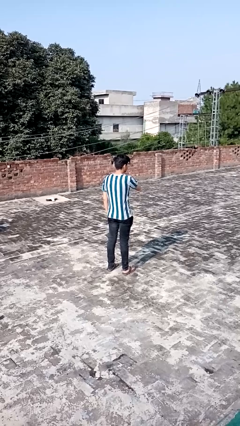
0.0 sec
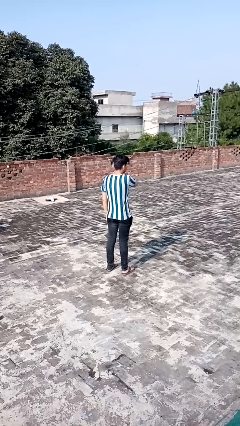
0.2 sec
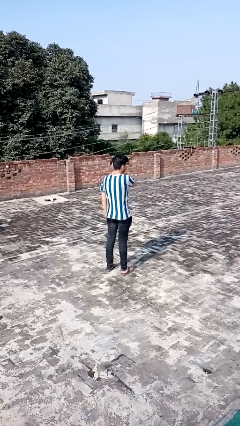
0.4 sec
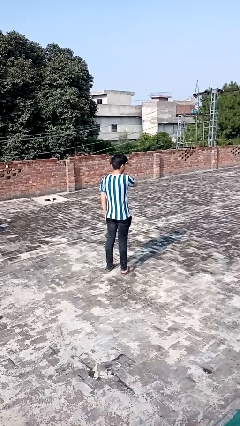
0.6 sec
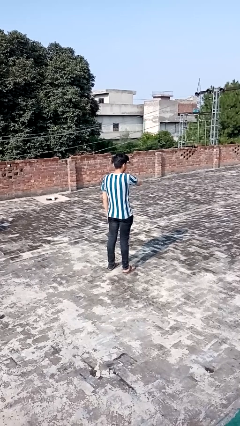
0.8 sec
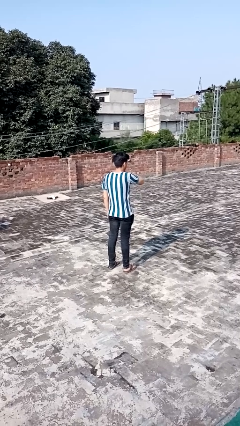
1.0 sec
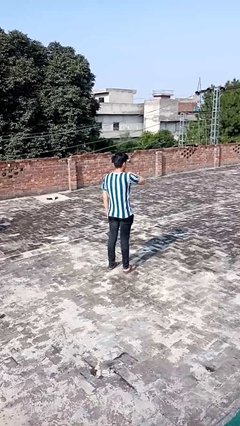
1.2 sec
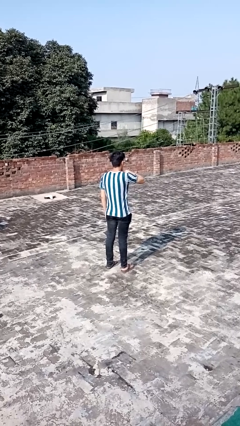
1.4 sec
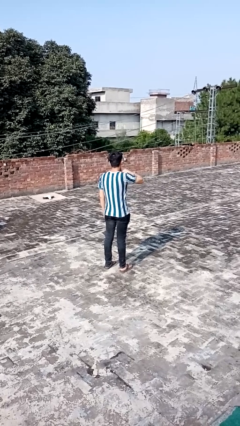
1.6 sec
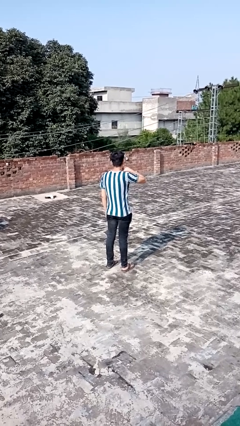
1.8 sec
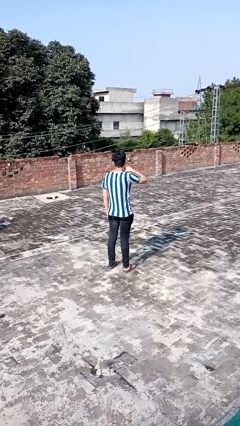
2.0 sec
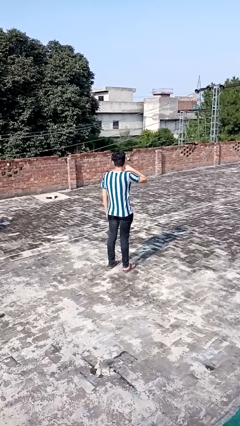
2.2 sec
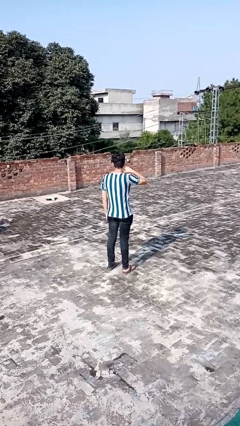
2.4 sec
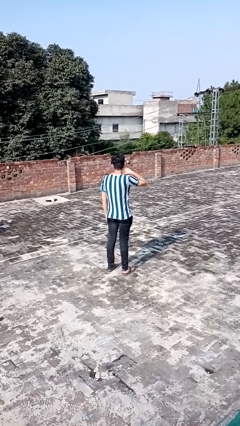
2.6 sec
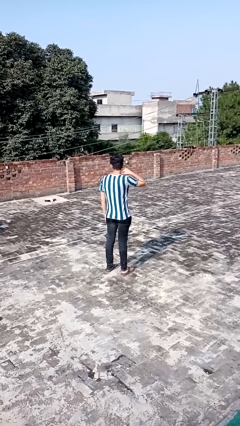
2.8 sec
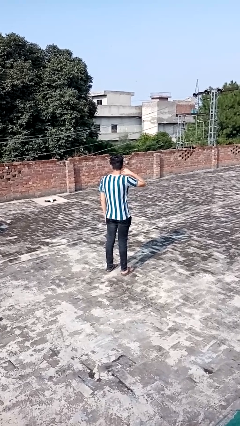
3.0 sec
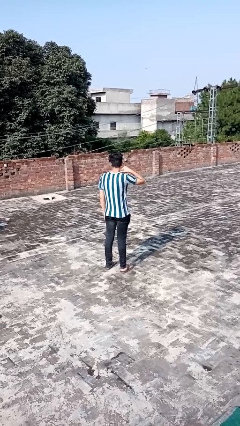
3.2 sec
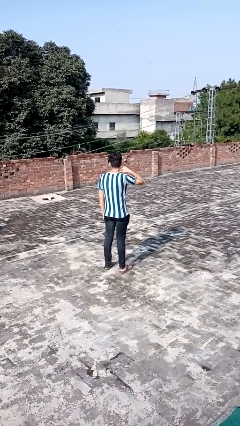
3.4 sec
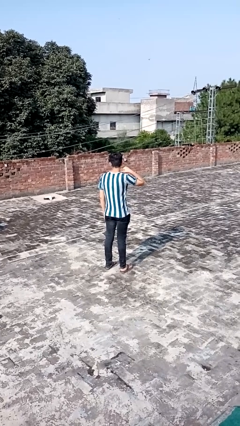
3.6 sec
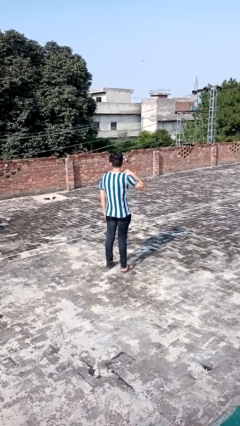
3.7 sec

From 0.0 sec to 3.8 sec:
person gestures cut

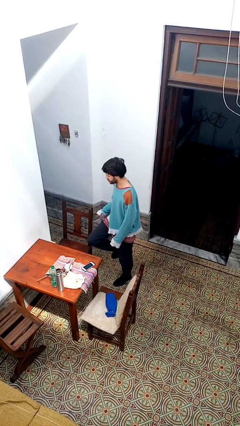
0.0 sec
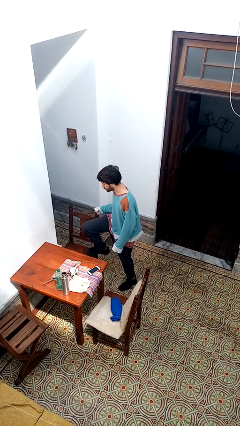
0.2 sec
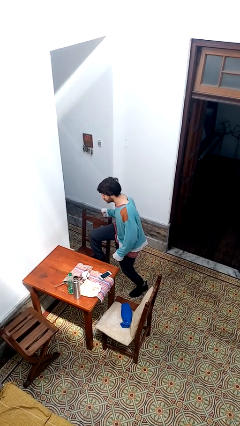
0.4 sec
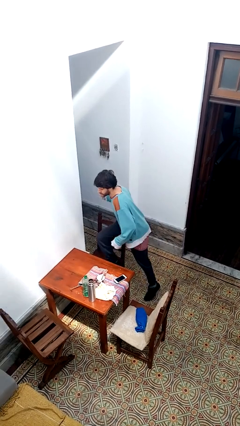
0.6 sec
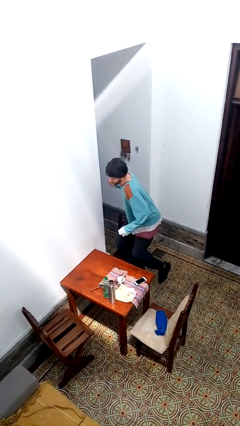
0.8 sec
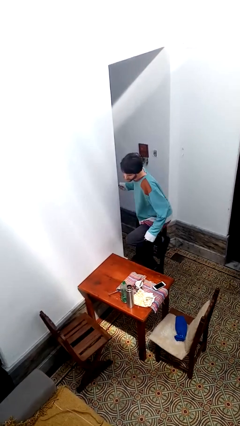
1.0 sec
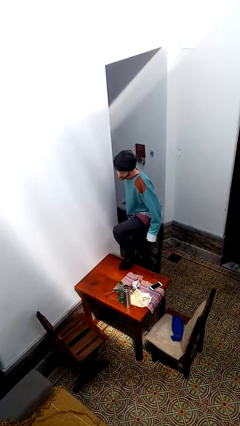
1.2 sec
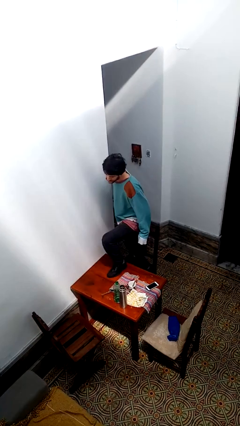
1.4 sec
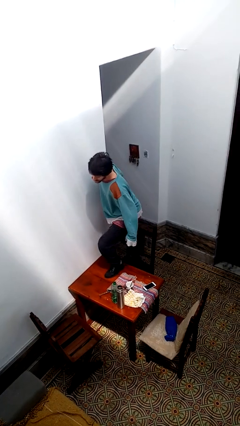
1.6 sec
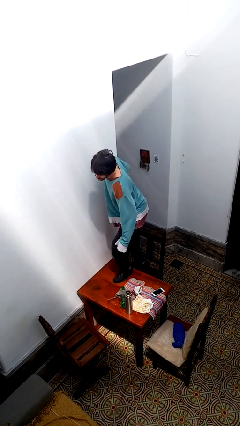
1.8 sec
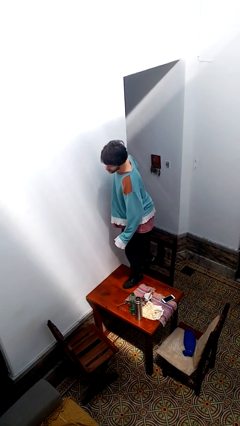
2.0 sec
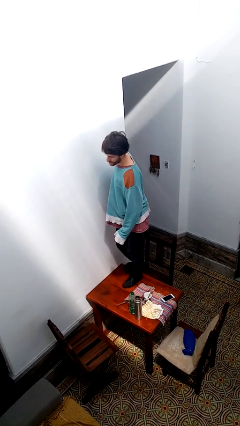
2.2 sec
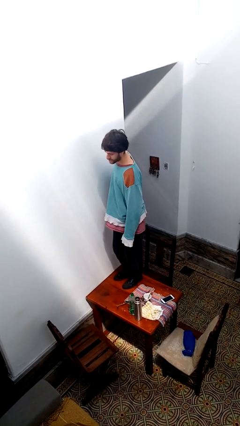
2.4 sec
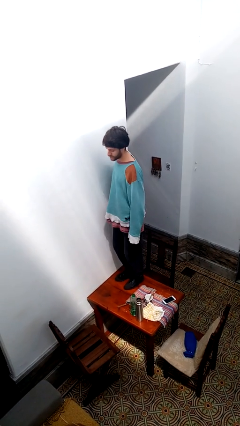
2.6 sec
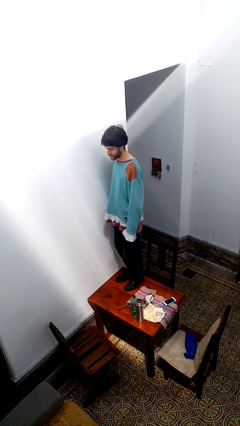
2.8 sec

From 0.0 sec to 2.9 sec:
person climbs on table

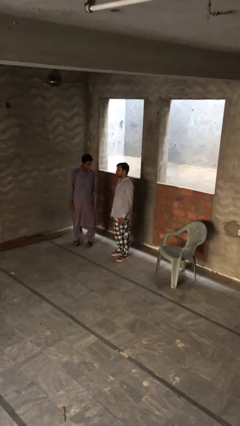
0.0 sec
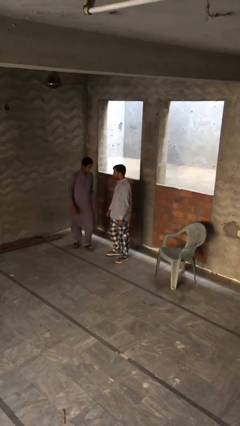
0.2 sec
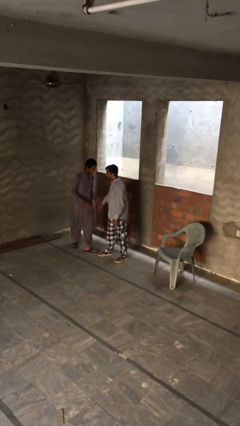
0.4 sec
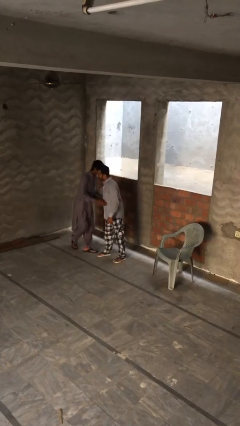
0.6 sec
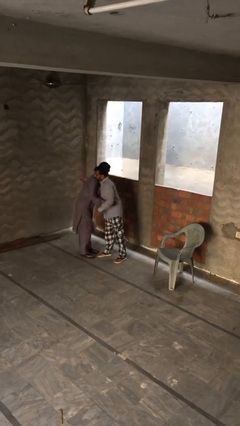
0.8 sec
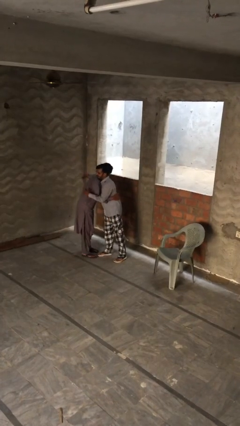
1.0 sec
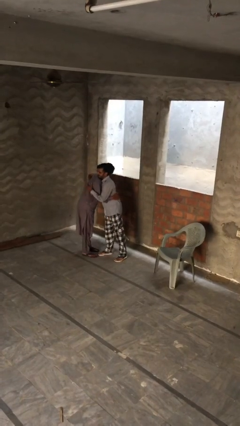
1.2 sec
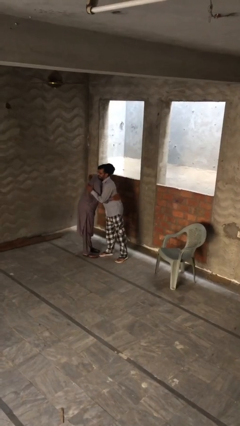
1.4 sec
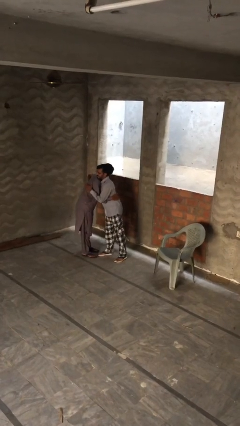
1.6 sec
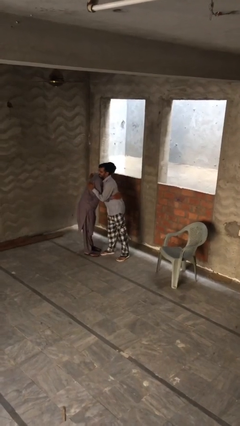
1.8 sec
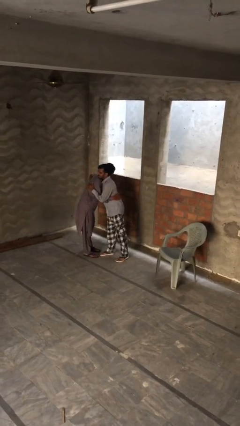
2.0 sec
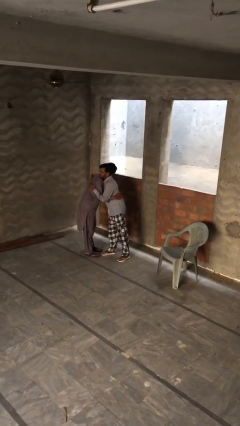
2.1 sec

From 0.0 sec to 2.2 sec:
person embraces person

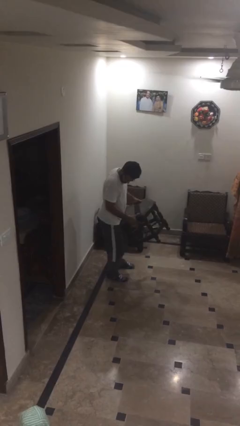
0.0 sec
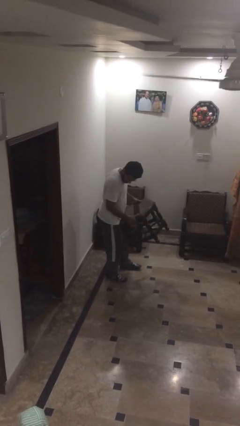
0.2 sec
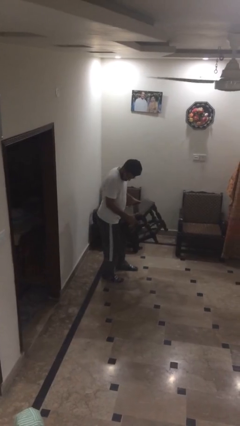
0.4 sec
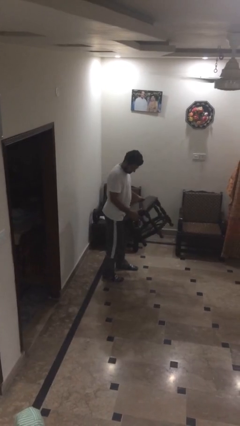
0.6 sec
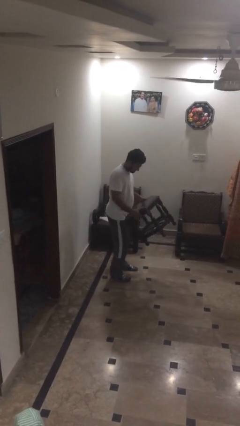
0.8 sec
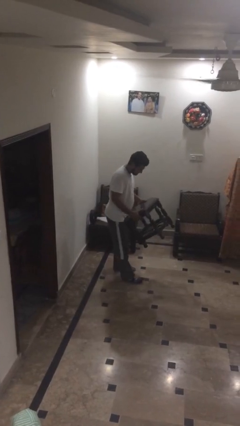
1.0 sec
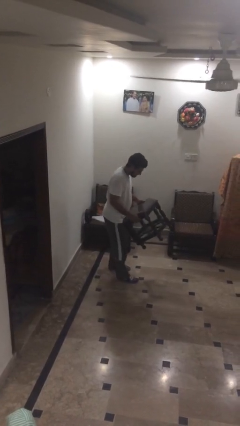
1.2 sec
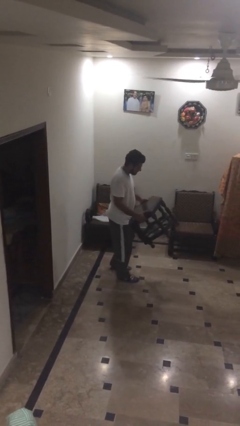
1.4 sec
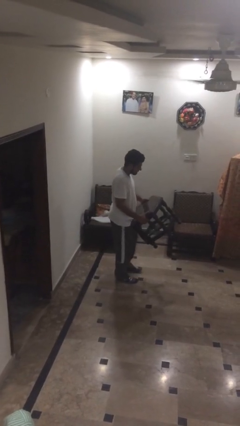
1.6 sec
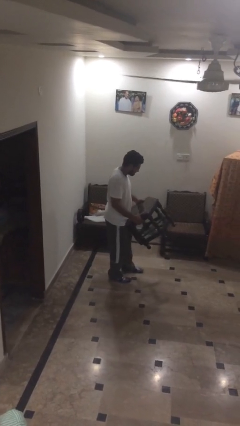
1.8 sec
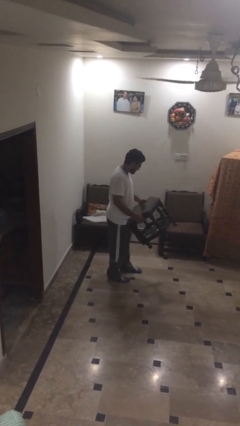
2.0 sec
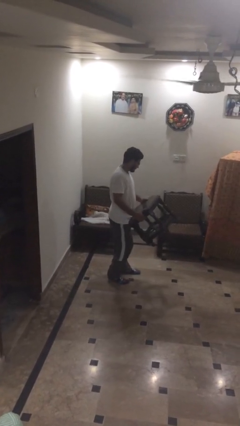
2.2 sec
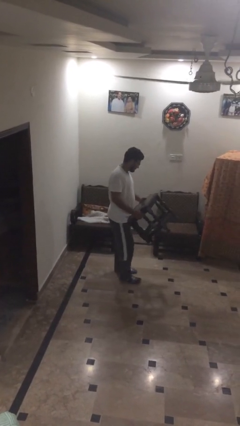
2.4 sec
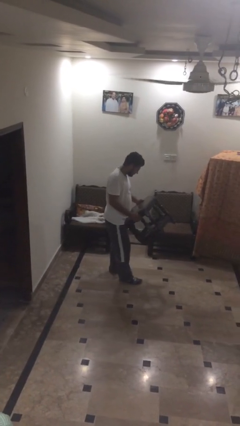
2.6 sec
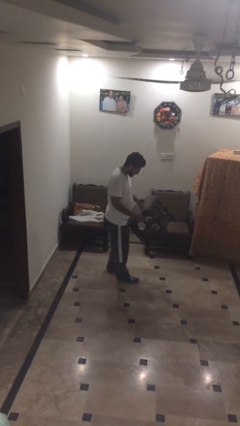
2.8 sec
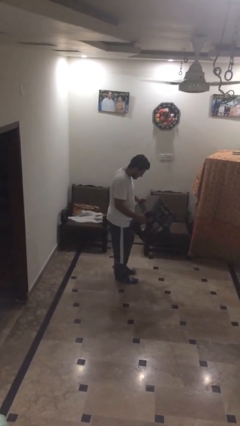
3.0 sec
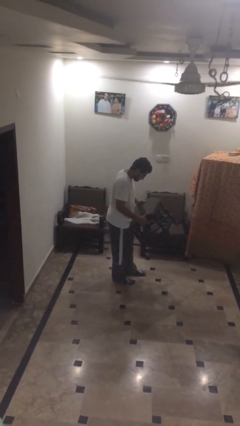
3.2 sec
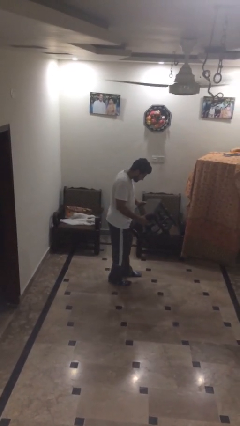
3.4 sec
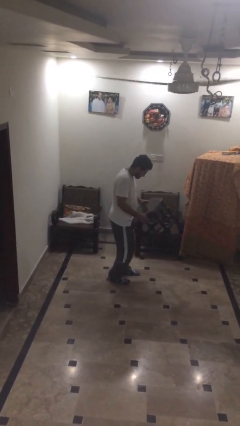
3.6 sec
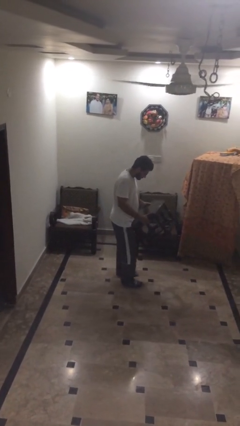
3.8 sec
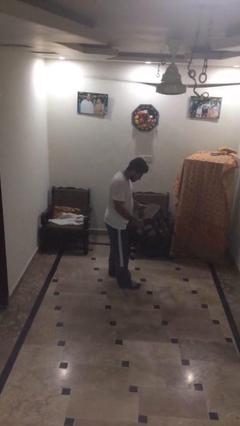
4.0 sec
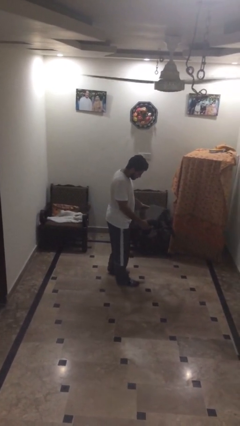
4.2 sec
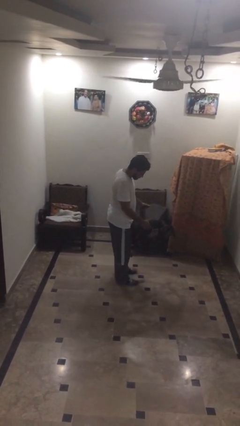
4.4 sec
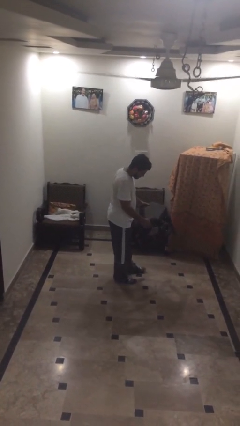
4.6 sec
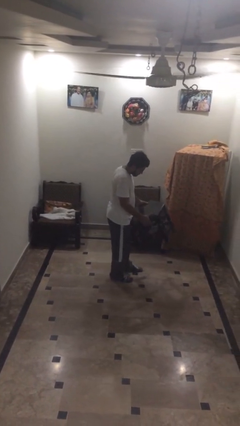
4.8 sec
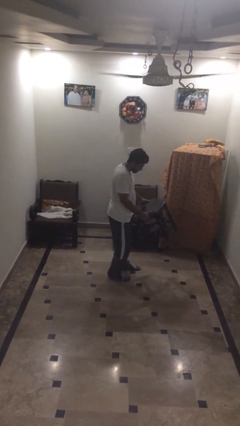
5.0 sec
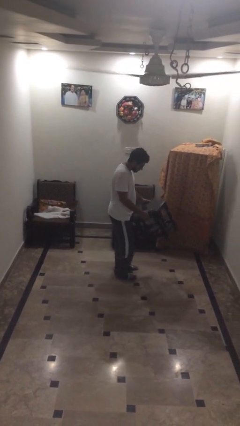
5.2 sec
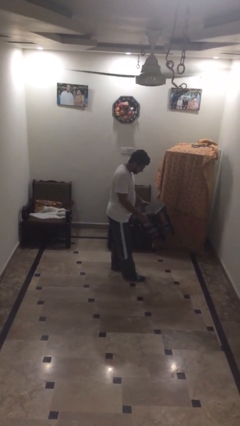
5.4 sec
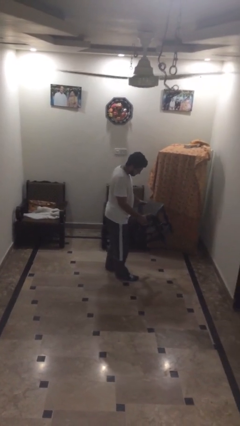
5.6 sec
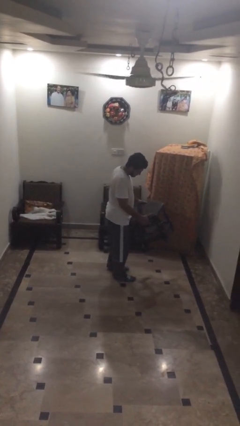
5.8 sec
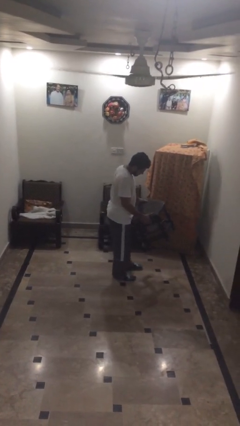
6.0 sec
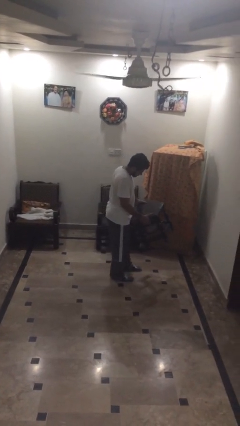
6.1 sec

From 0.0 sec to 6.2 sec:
person carries heavy object

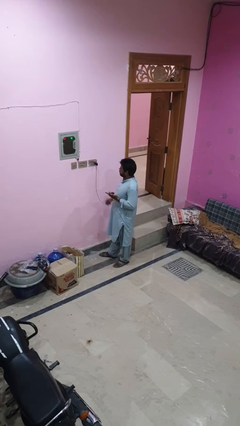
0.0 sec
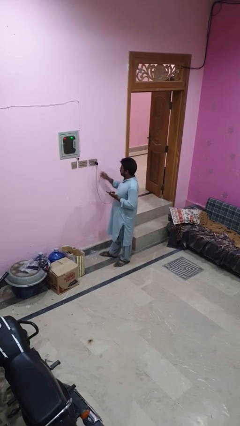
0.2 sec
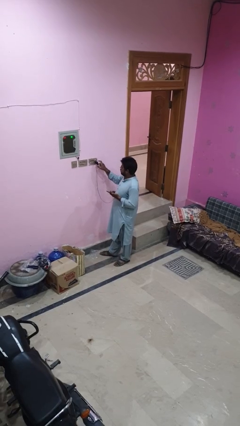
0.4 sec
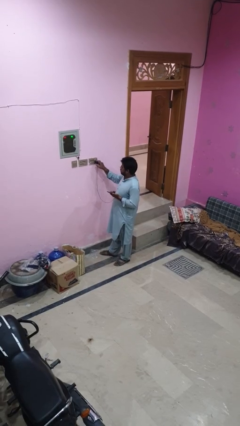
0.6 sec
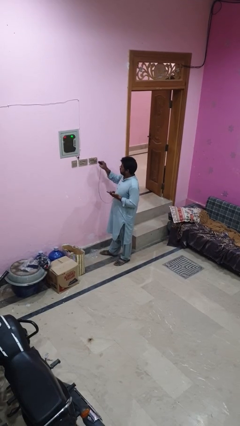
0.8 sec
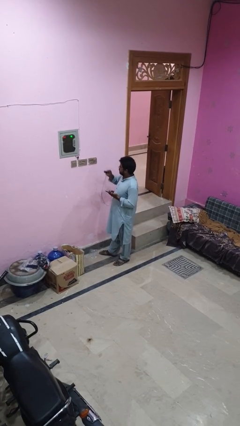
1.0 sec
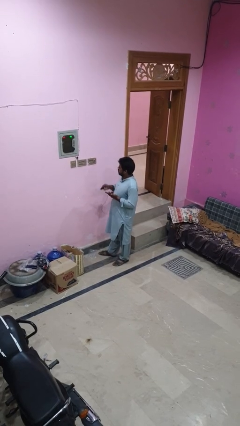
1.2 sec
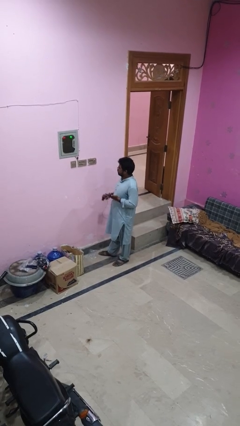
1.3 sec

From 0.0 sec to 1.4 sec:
person unplugs from electrical socket

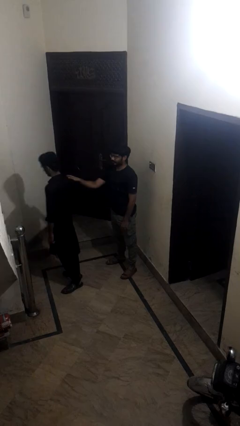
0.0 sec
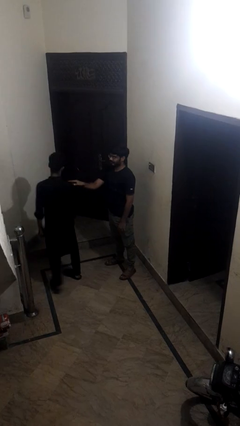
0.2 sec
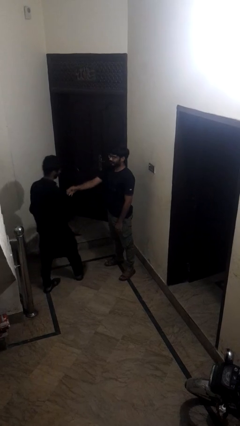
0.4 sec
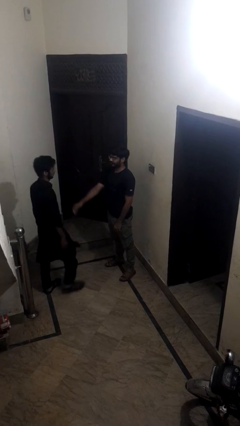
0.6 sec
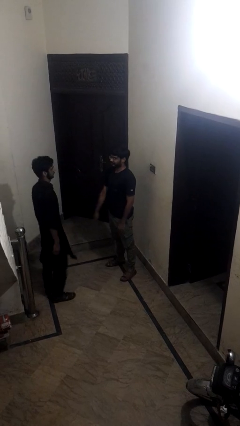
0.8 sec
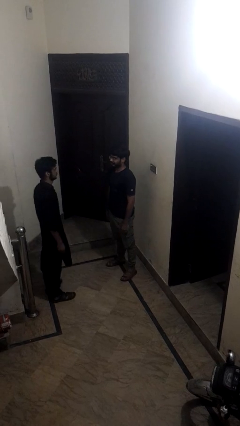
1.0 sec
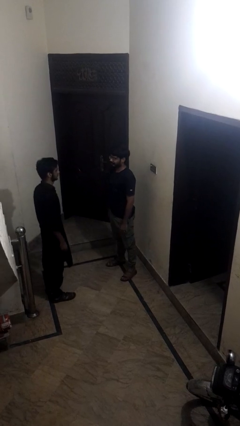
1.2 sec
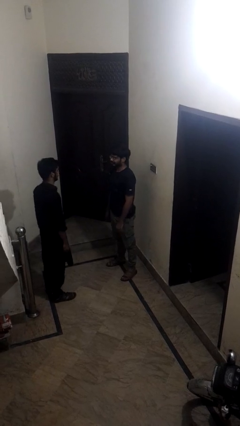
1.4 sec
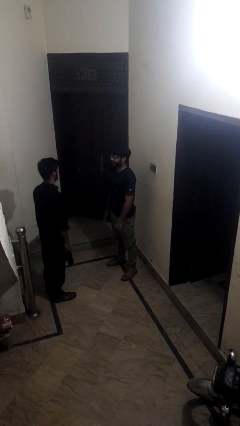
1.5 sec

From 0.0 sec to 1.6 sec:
person spins person around
